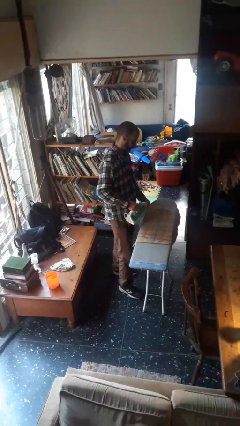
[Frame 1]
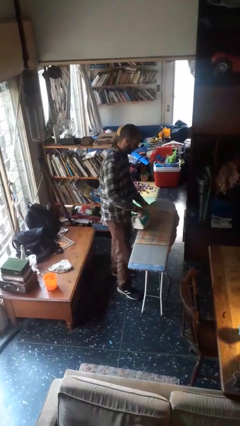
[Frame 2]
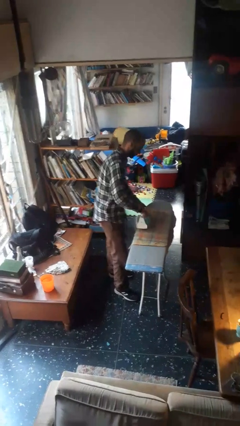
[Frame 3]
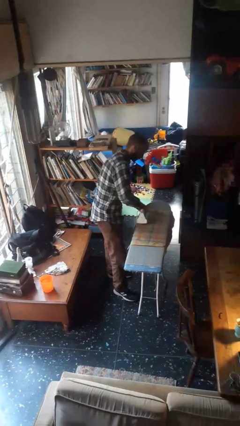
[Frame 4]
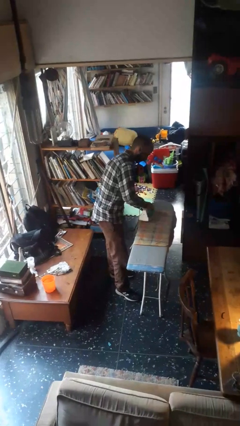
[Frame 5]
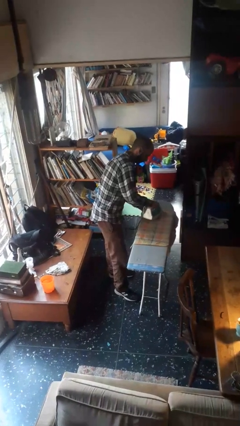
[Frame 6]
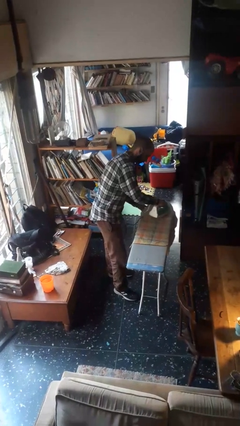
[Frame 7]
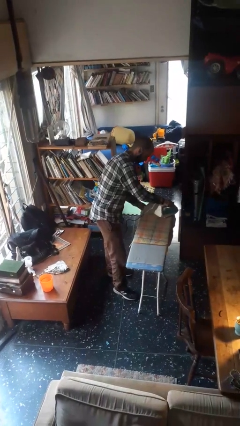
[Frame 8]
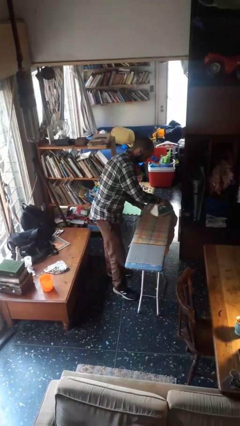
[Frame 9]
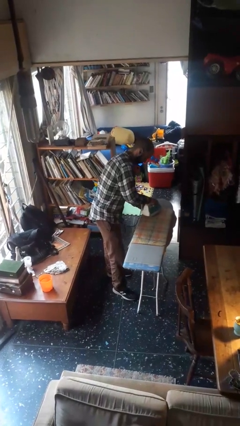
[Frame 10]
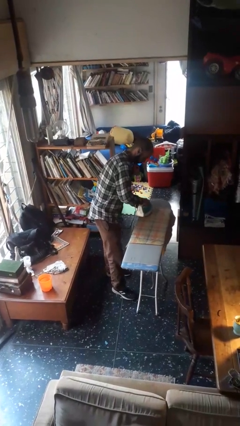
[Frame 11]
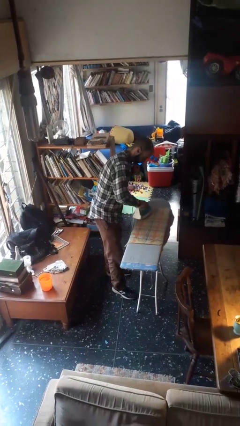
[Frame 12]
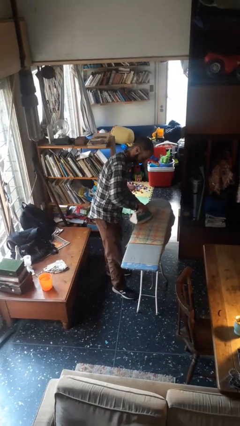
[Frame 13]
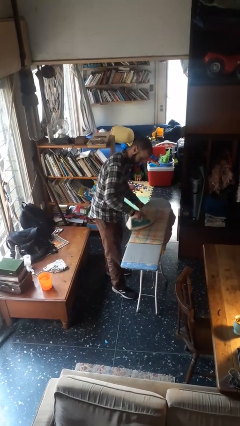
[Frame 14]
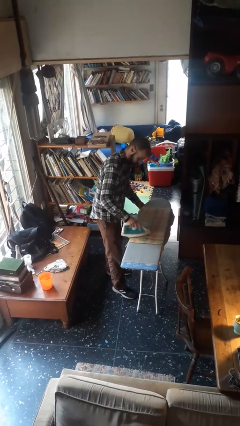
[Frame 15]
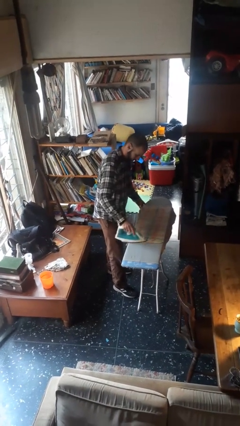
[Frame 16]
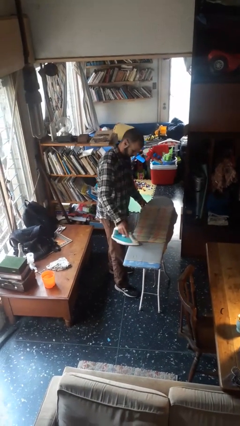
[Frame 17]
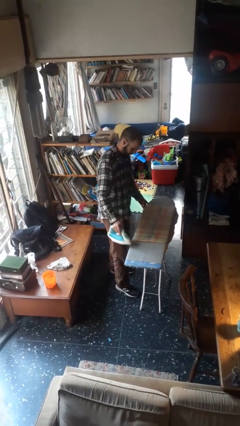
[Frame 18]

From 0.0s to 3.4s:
person irons clothes

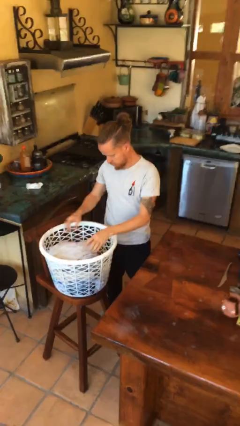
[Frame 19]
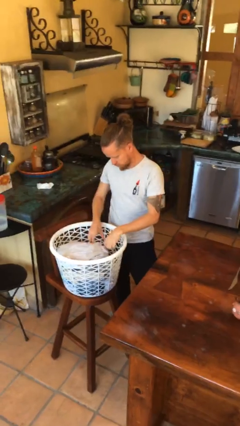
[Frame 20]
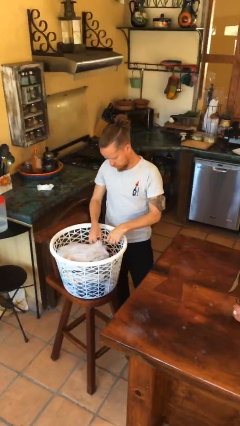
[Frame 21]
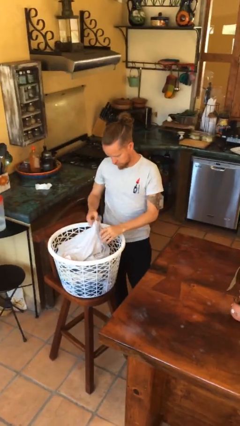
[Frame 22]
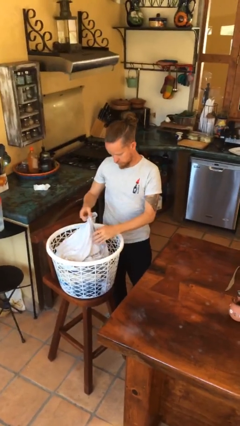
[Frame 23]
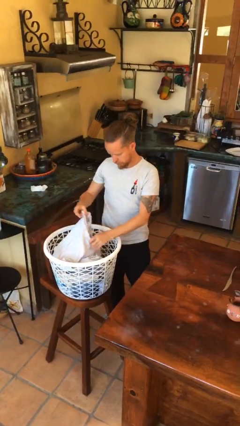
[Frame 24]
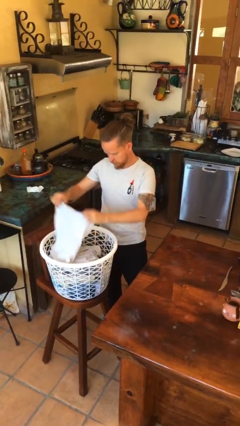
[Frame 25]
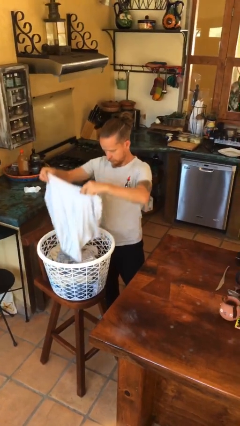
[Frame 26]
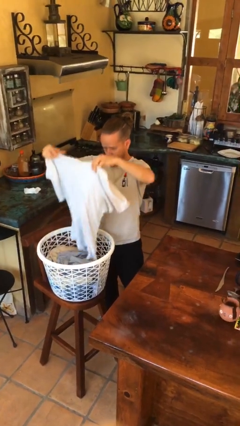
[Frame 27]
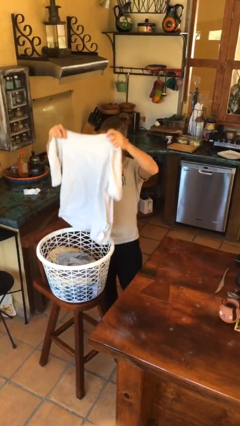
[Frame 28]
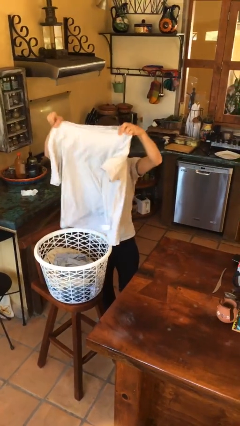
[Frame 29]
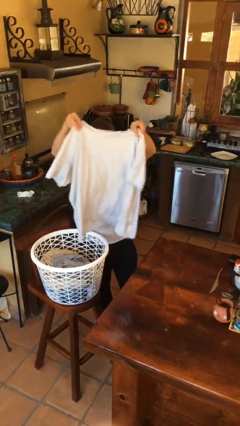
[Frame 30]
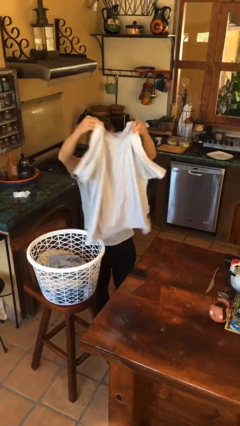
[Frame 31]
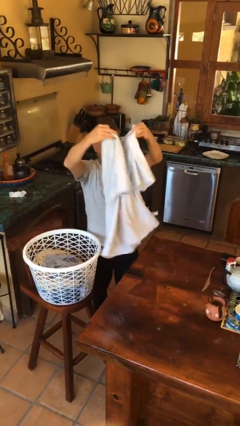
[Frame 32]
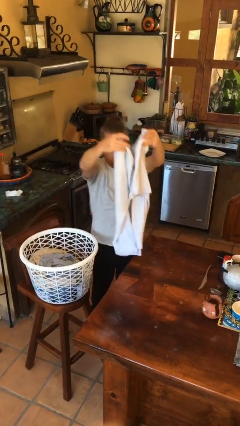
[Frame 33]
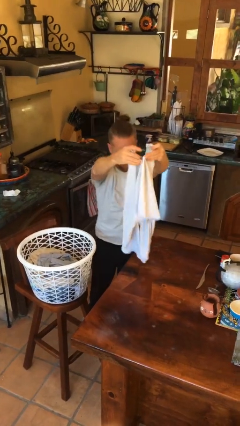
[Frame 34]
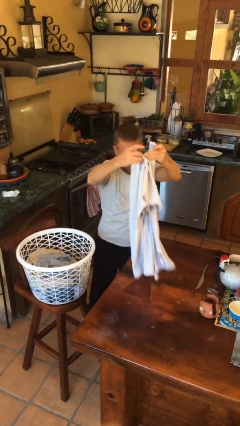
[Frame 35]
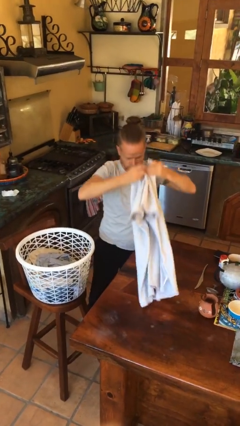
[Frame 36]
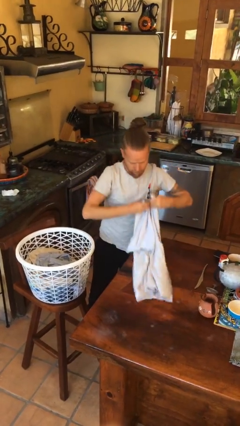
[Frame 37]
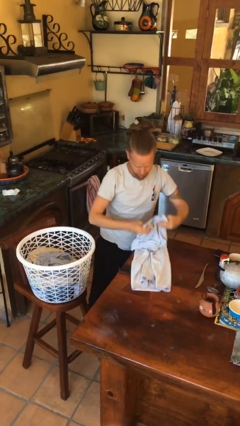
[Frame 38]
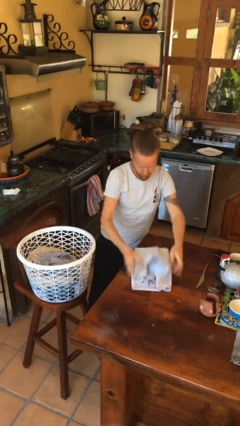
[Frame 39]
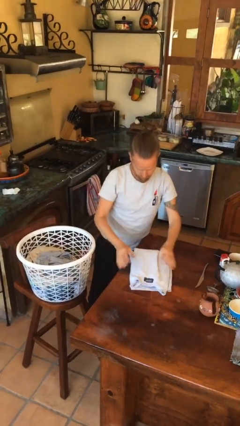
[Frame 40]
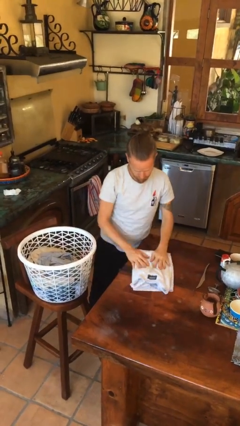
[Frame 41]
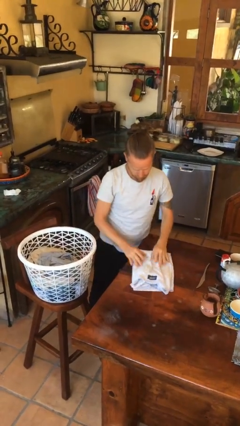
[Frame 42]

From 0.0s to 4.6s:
person folds shirt

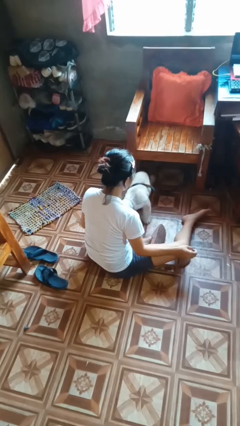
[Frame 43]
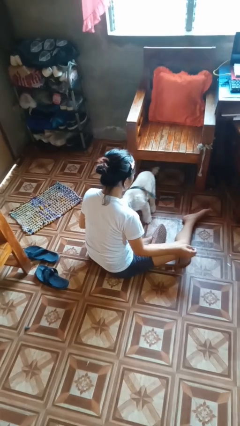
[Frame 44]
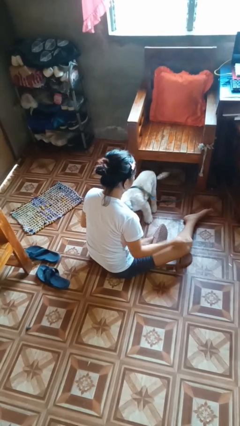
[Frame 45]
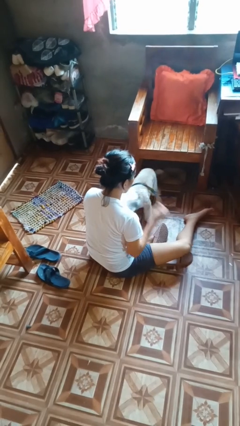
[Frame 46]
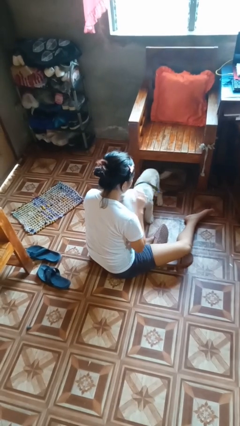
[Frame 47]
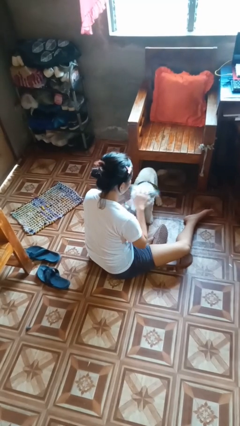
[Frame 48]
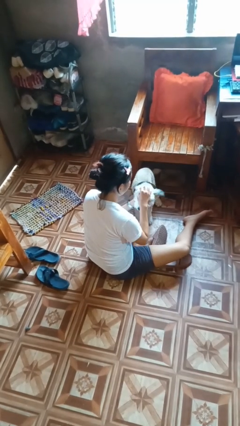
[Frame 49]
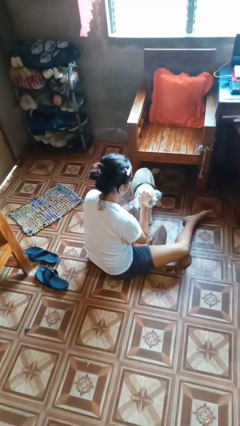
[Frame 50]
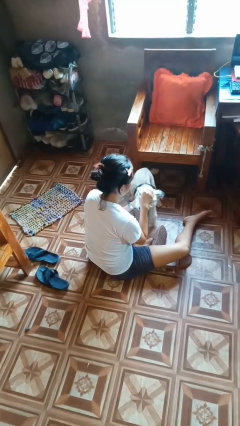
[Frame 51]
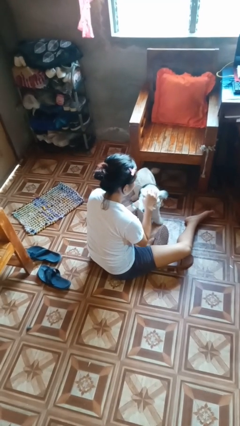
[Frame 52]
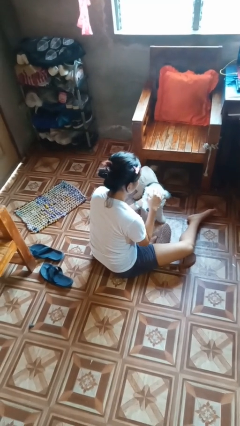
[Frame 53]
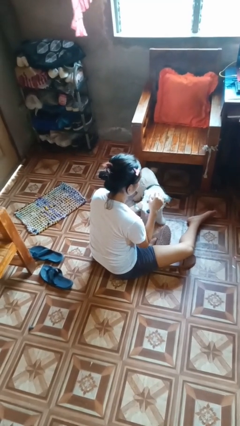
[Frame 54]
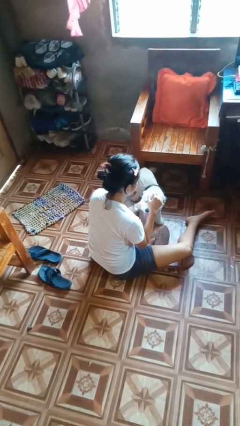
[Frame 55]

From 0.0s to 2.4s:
person pets dog

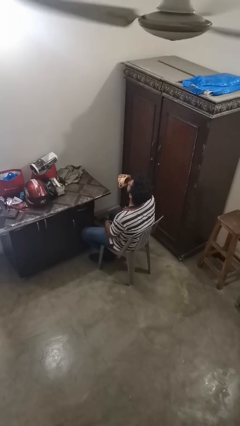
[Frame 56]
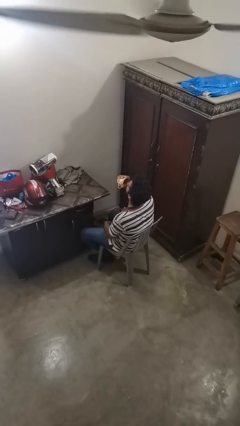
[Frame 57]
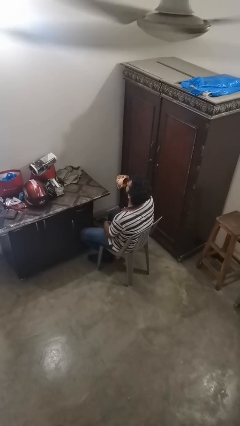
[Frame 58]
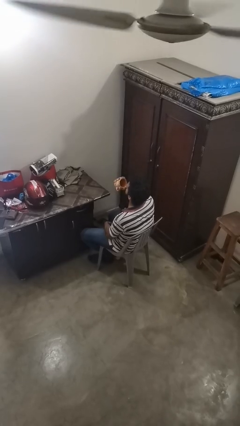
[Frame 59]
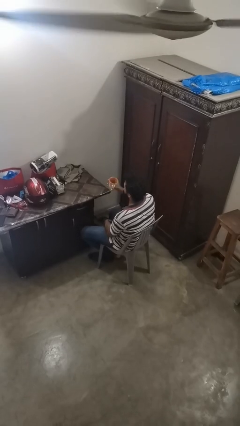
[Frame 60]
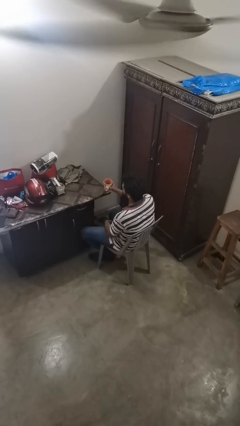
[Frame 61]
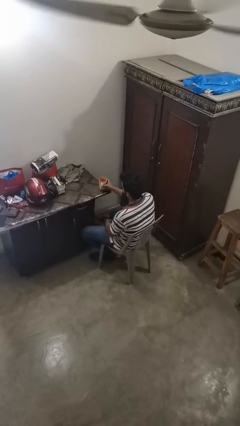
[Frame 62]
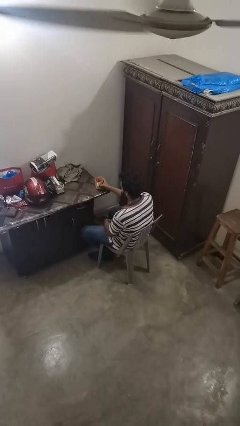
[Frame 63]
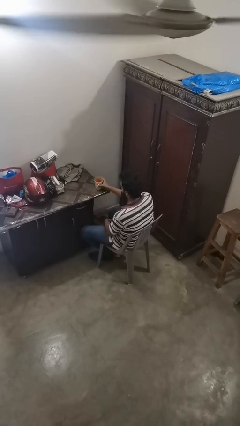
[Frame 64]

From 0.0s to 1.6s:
person puts down object on table

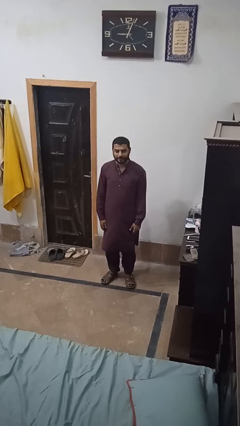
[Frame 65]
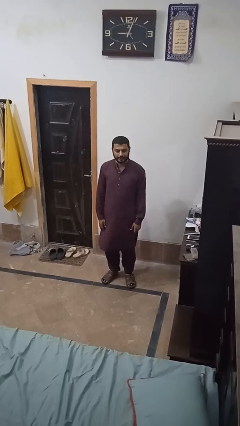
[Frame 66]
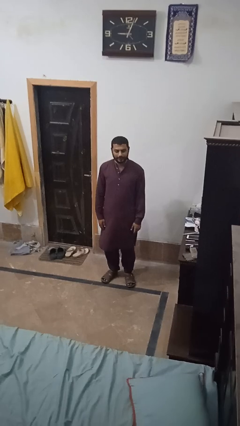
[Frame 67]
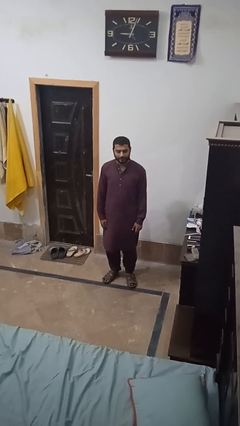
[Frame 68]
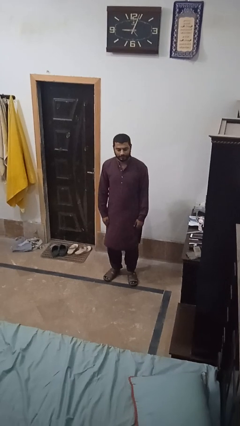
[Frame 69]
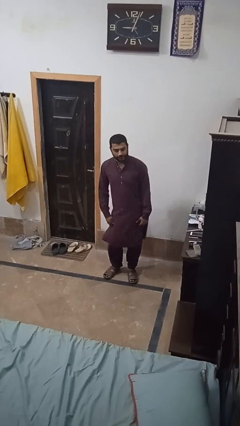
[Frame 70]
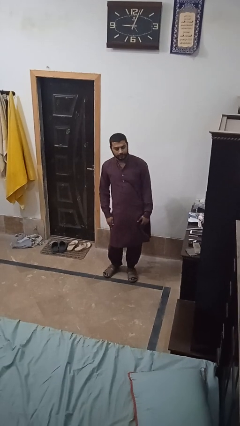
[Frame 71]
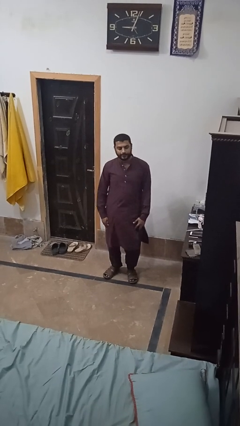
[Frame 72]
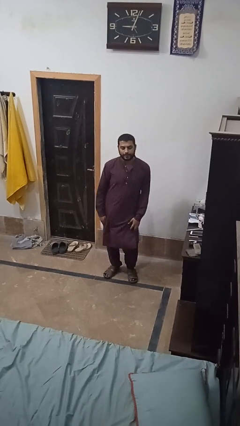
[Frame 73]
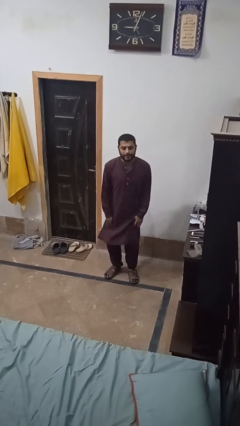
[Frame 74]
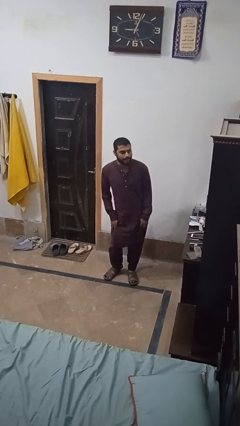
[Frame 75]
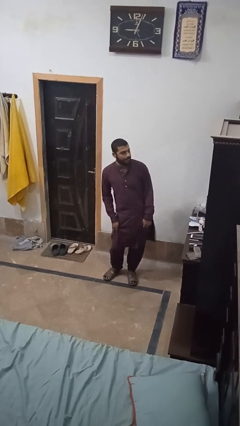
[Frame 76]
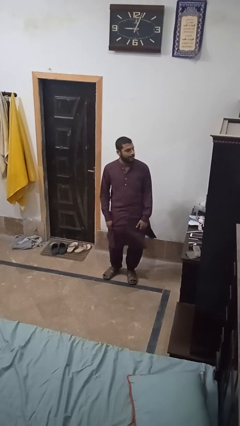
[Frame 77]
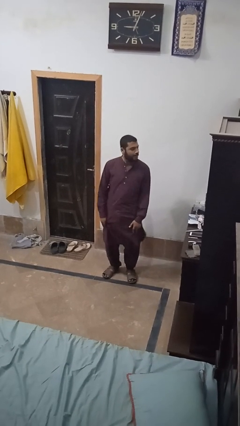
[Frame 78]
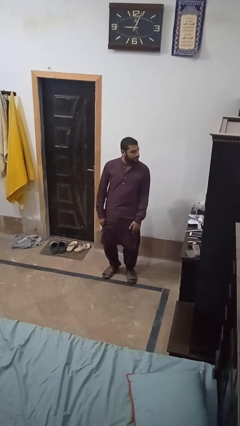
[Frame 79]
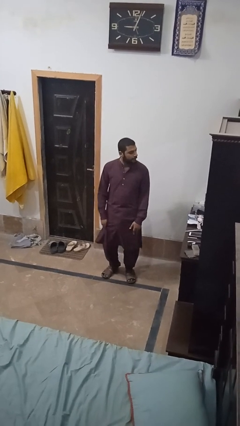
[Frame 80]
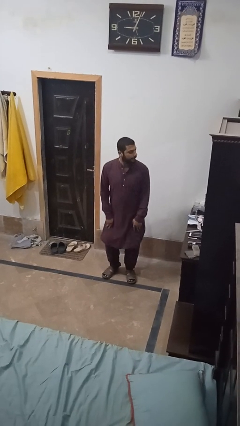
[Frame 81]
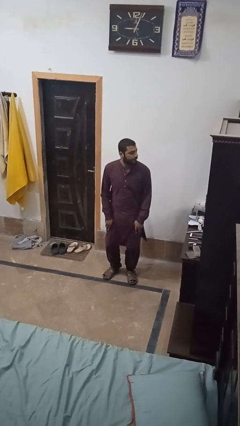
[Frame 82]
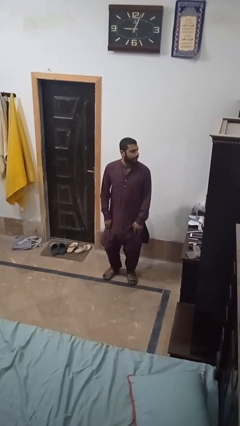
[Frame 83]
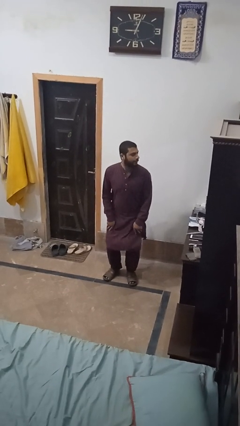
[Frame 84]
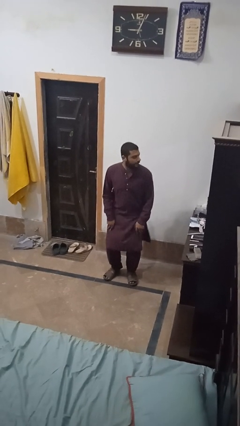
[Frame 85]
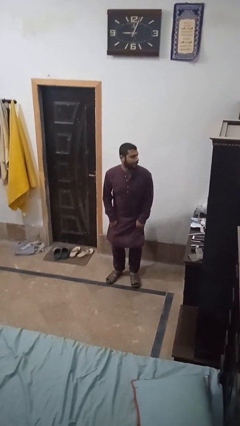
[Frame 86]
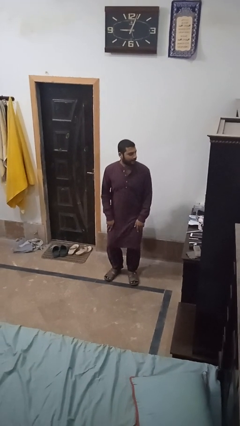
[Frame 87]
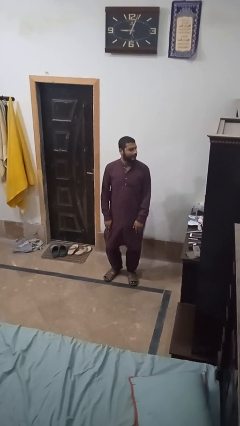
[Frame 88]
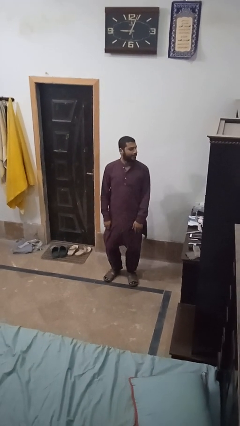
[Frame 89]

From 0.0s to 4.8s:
person wiggles hips

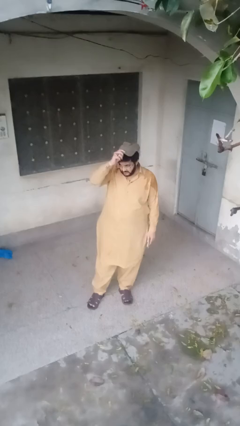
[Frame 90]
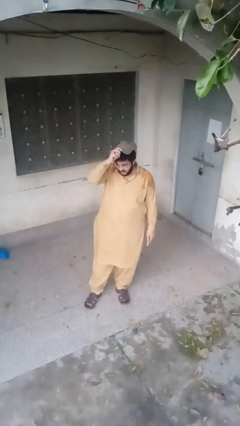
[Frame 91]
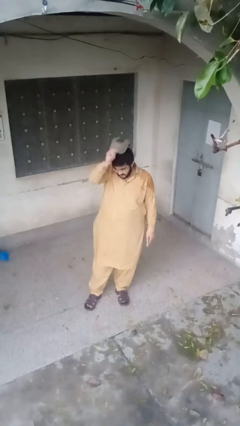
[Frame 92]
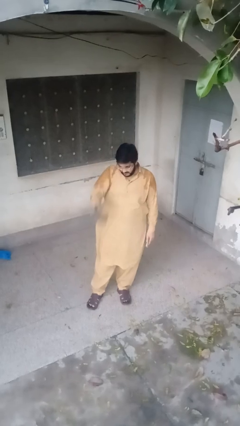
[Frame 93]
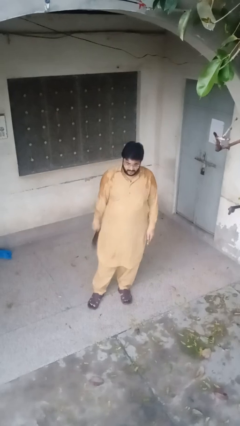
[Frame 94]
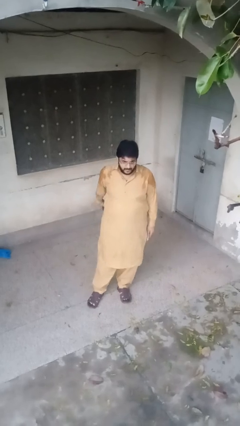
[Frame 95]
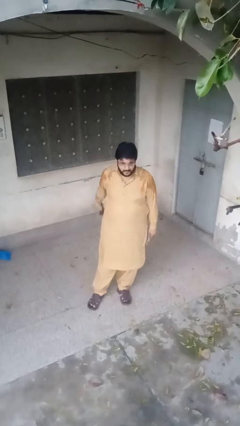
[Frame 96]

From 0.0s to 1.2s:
person takes off hat
